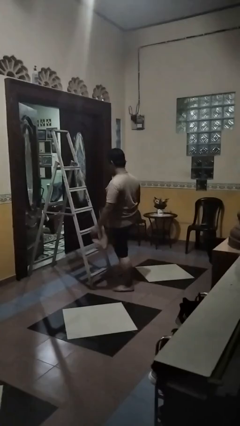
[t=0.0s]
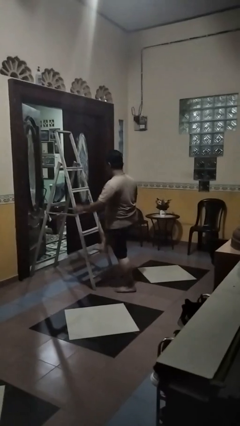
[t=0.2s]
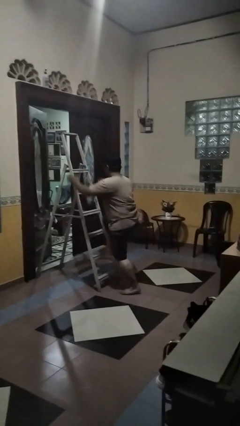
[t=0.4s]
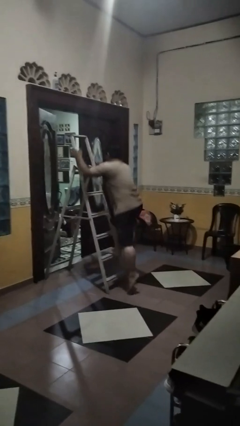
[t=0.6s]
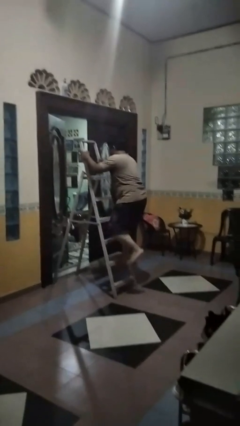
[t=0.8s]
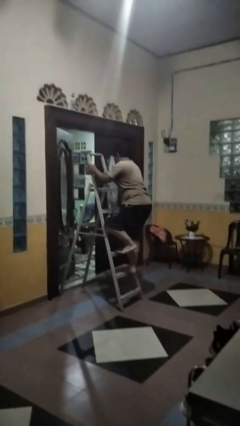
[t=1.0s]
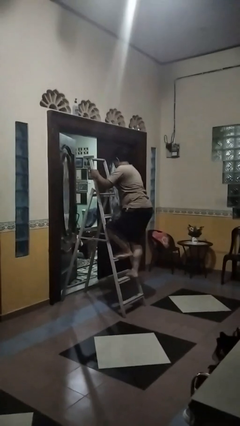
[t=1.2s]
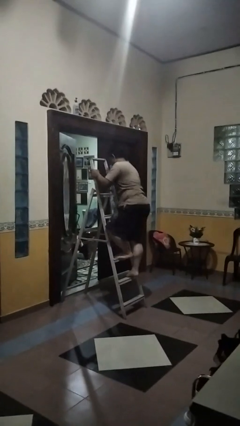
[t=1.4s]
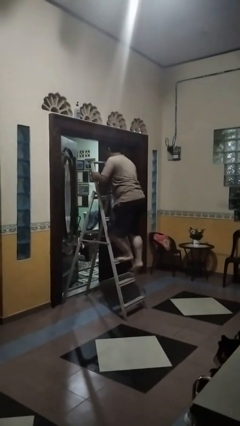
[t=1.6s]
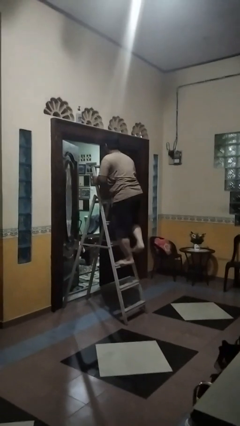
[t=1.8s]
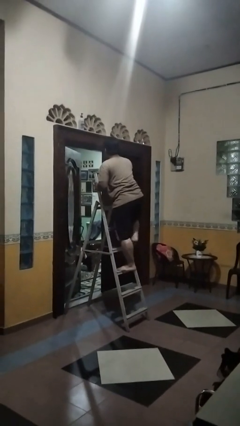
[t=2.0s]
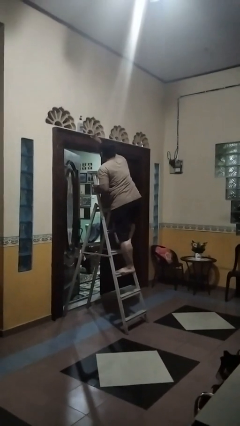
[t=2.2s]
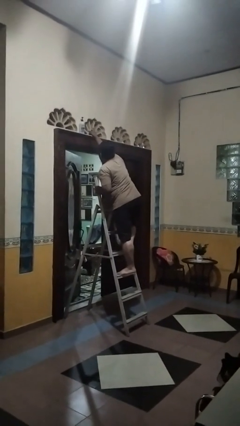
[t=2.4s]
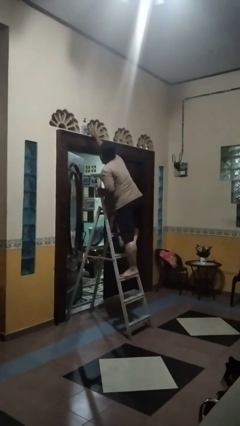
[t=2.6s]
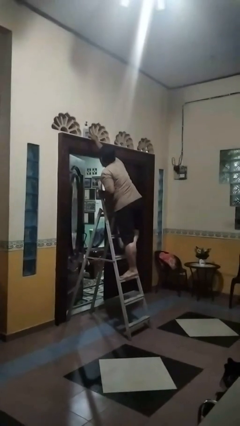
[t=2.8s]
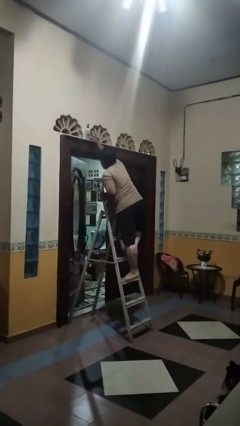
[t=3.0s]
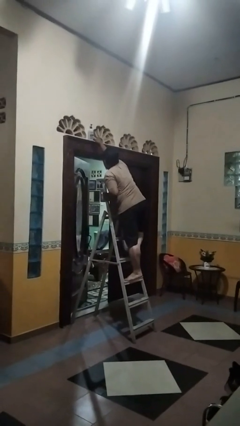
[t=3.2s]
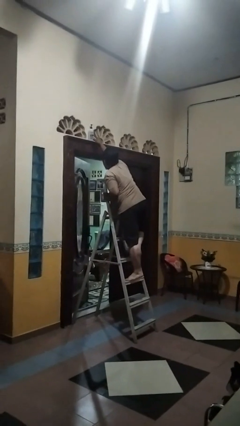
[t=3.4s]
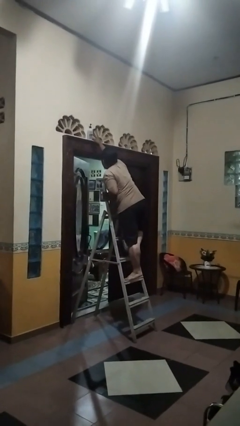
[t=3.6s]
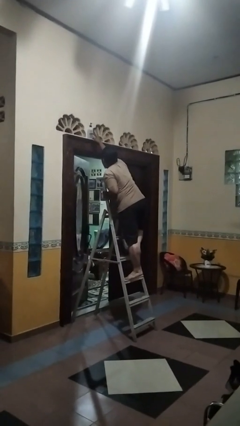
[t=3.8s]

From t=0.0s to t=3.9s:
person climbs up ladder

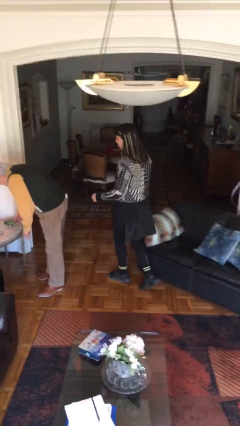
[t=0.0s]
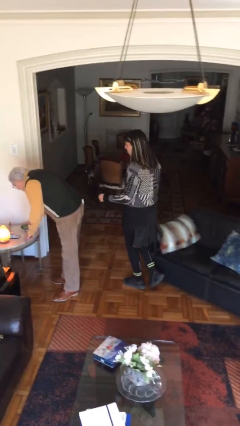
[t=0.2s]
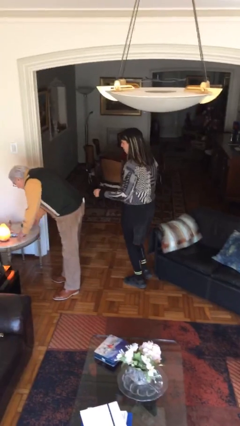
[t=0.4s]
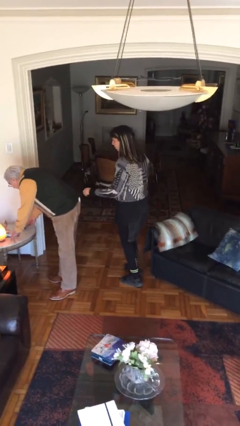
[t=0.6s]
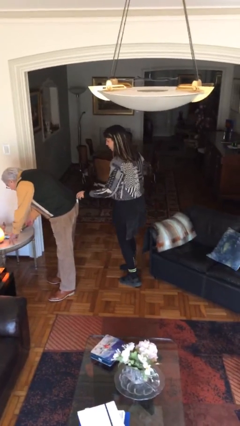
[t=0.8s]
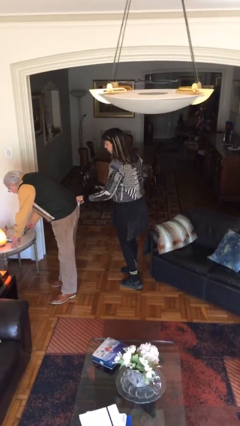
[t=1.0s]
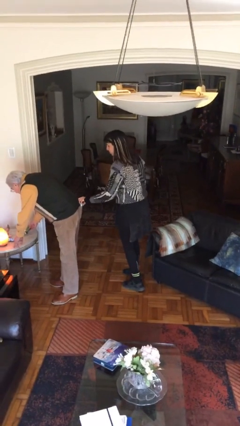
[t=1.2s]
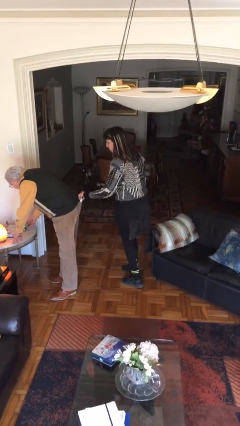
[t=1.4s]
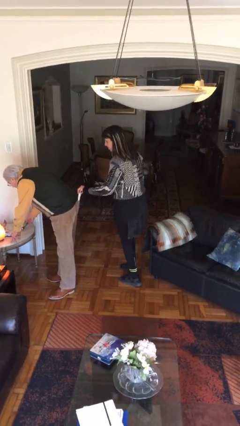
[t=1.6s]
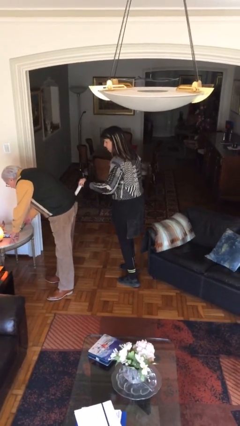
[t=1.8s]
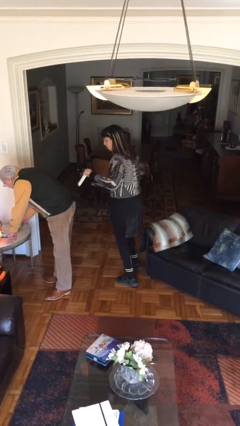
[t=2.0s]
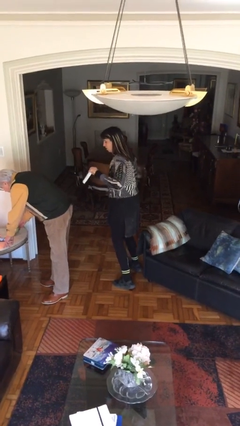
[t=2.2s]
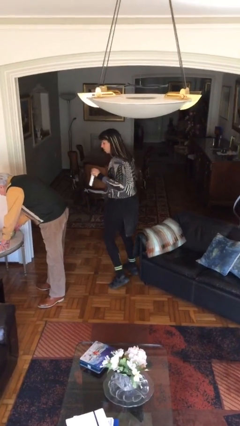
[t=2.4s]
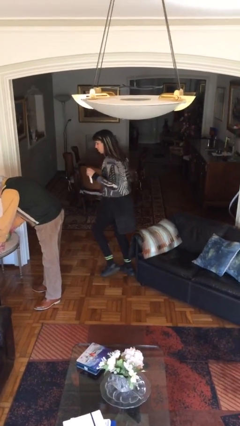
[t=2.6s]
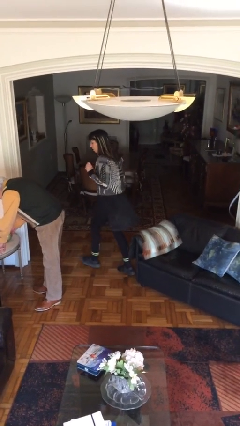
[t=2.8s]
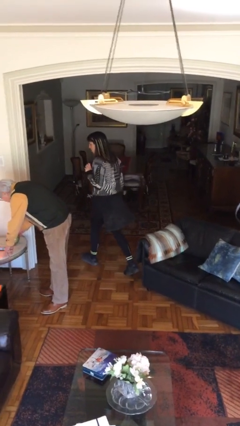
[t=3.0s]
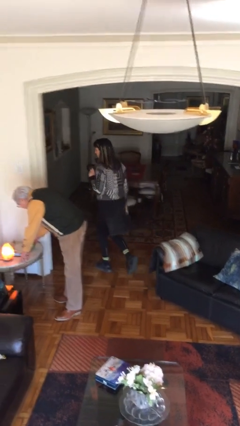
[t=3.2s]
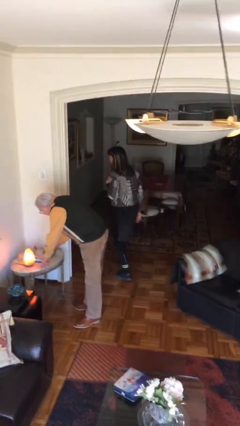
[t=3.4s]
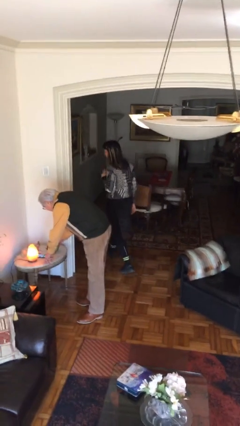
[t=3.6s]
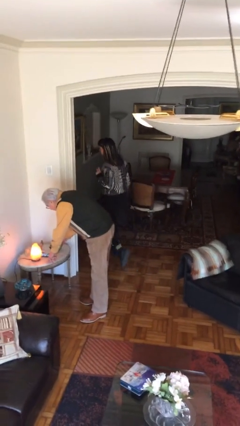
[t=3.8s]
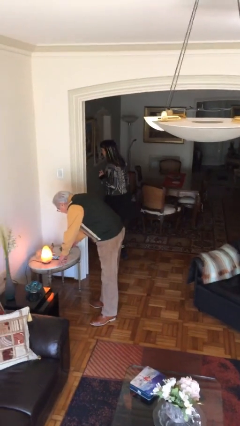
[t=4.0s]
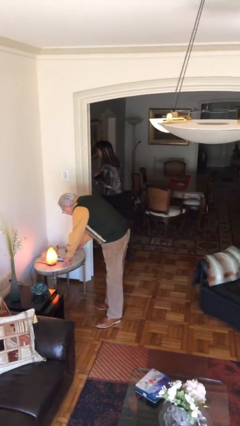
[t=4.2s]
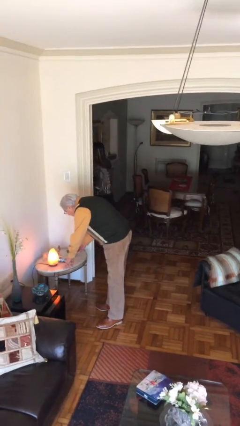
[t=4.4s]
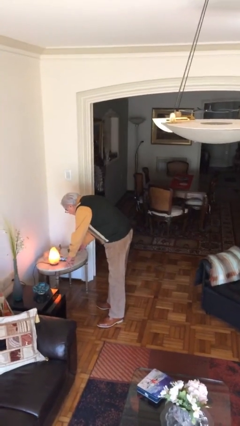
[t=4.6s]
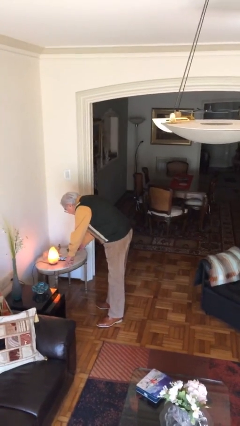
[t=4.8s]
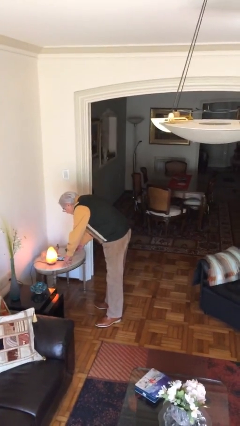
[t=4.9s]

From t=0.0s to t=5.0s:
person steals object from person

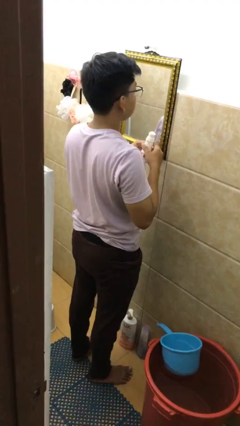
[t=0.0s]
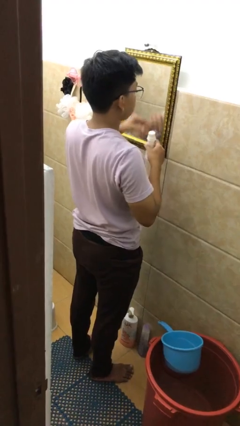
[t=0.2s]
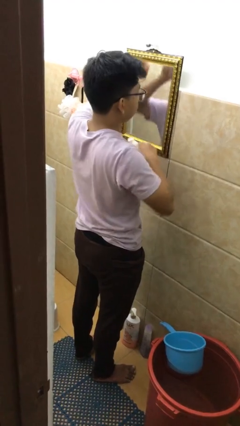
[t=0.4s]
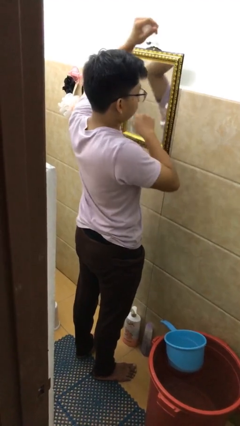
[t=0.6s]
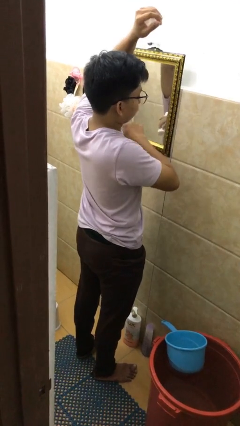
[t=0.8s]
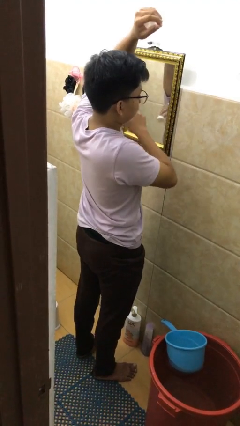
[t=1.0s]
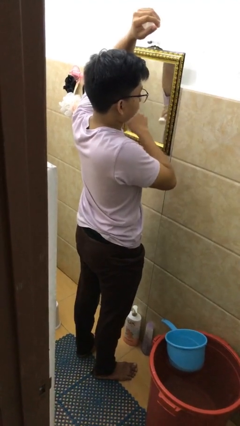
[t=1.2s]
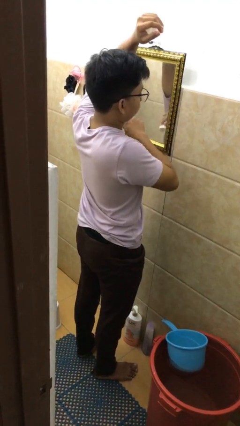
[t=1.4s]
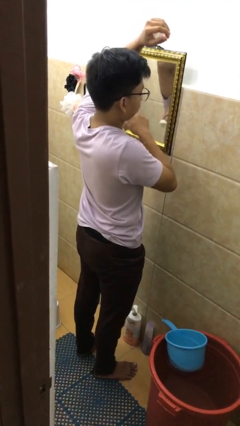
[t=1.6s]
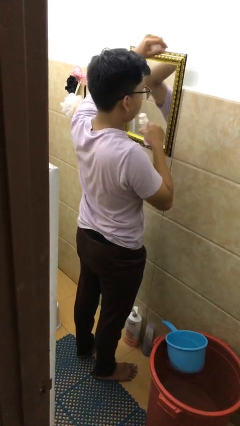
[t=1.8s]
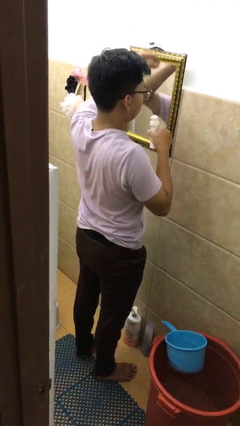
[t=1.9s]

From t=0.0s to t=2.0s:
person applies deodorant

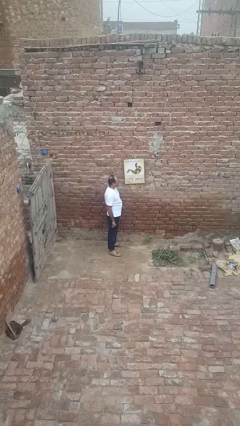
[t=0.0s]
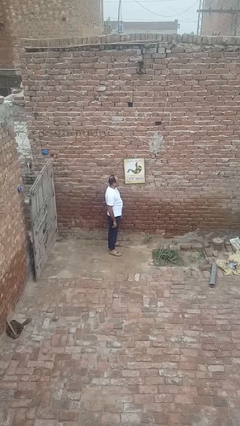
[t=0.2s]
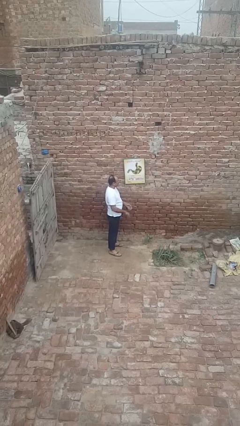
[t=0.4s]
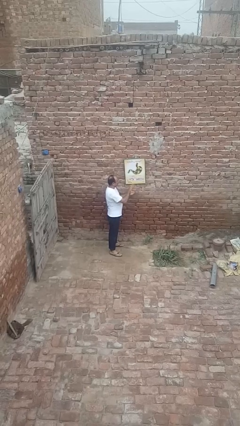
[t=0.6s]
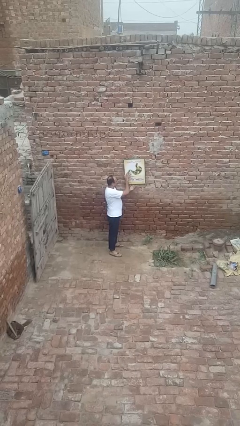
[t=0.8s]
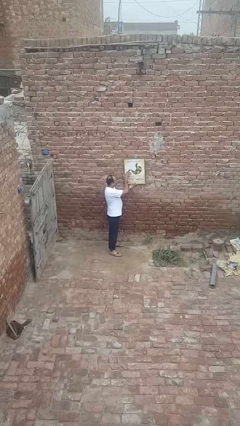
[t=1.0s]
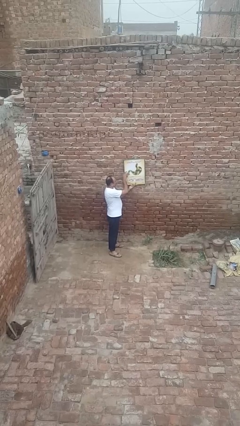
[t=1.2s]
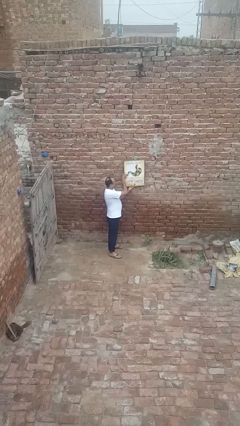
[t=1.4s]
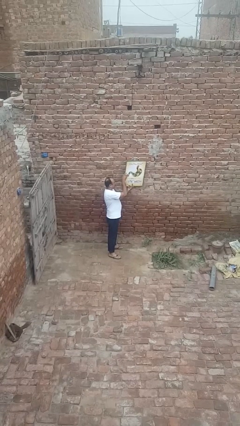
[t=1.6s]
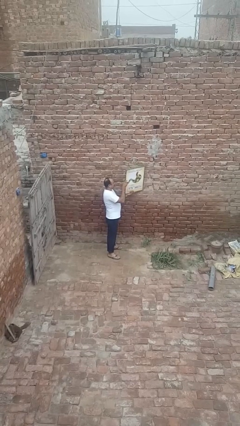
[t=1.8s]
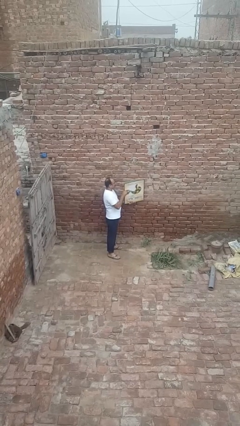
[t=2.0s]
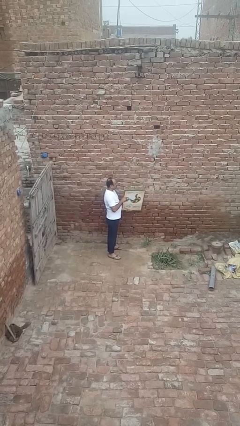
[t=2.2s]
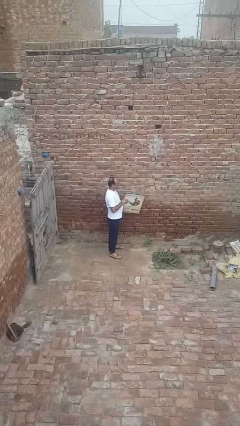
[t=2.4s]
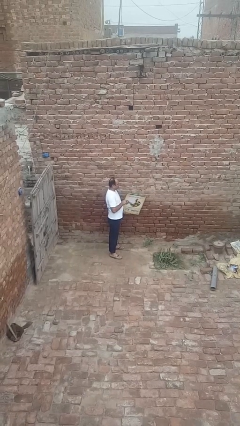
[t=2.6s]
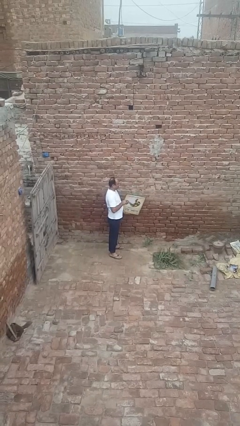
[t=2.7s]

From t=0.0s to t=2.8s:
person takes down picture frame

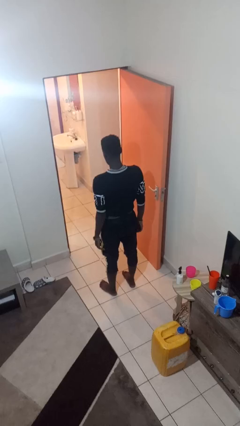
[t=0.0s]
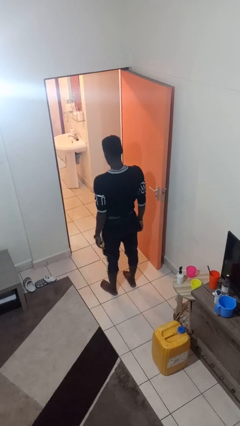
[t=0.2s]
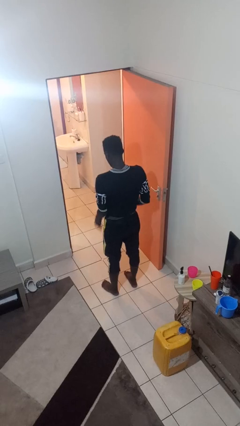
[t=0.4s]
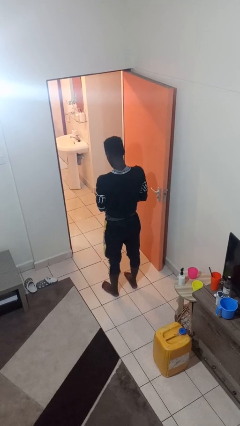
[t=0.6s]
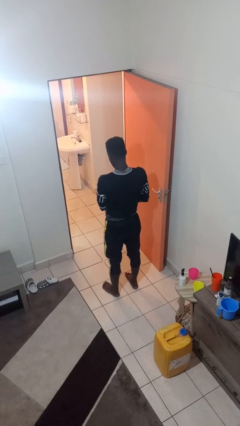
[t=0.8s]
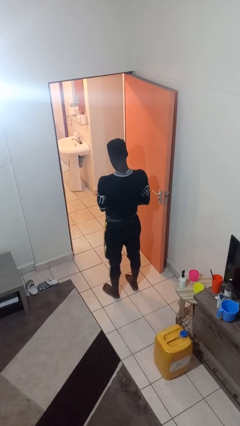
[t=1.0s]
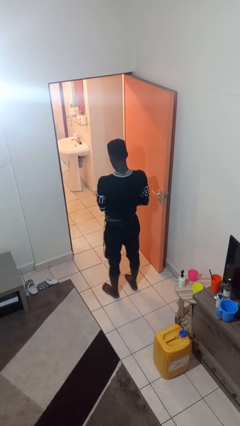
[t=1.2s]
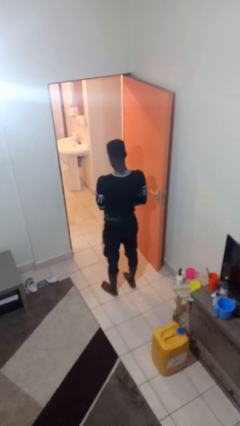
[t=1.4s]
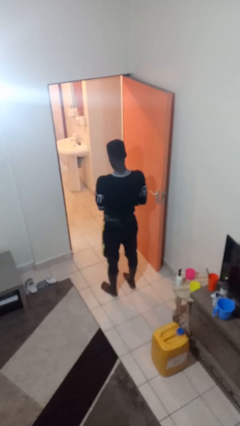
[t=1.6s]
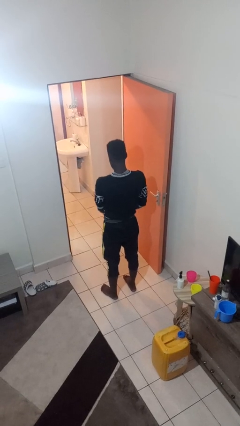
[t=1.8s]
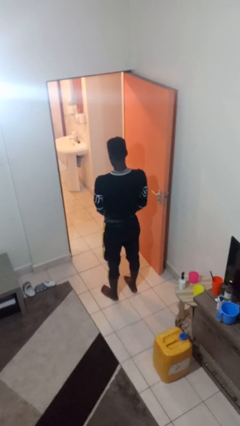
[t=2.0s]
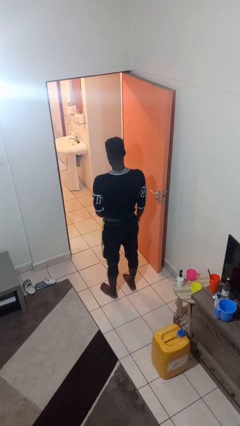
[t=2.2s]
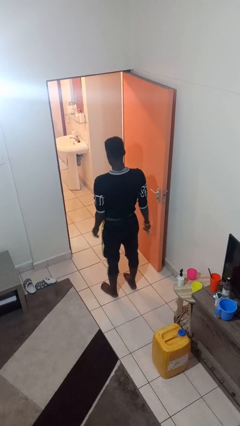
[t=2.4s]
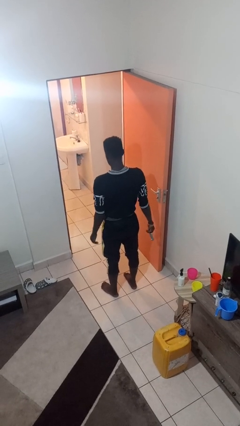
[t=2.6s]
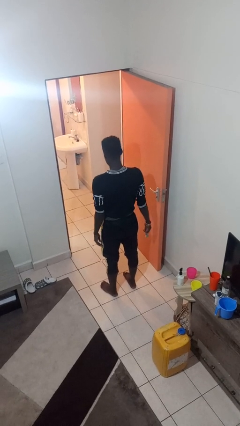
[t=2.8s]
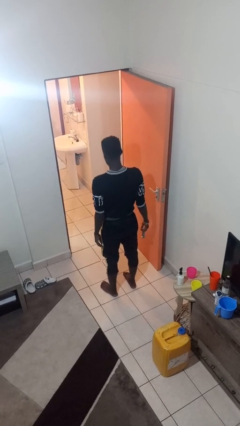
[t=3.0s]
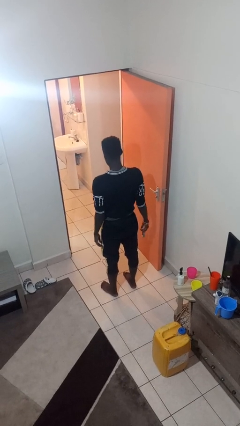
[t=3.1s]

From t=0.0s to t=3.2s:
person takes off wristwatch

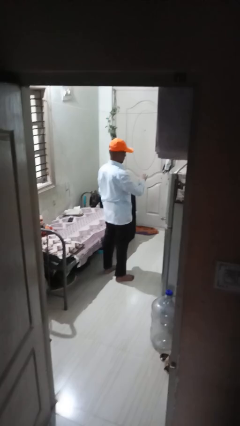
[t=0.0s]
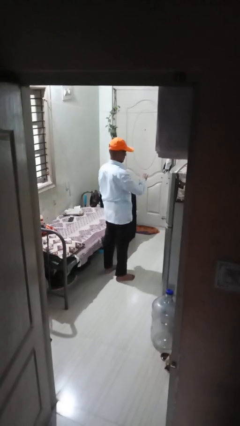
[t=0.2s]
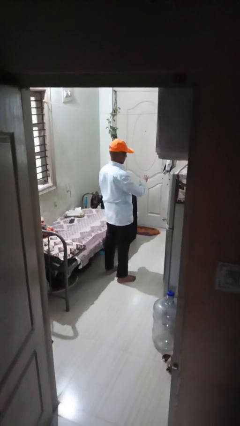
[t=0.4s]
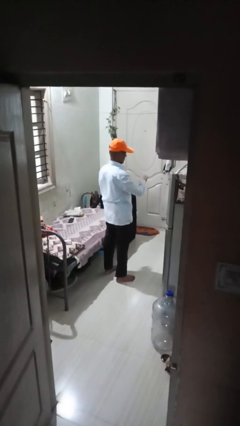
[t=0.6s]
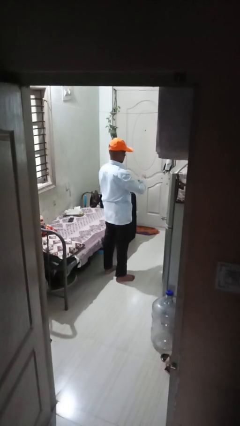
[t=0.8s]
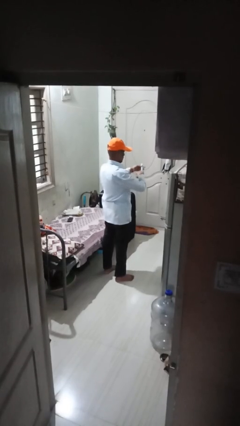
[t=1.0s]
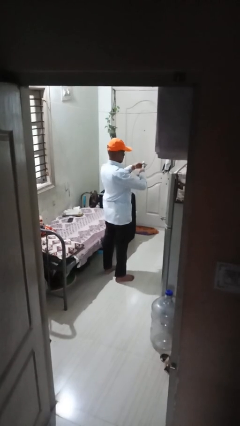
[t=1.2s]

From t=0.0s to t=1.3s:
person clips fingernails
